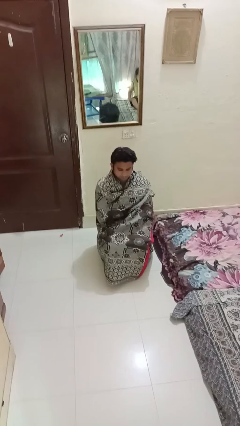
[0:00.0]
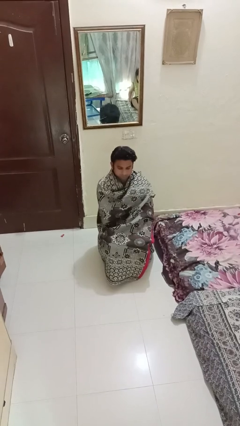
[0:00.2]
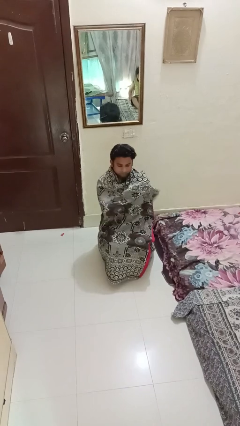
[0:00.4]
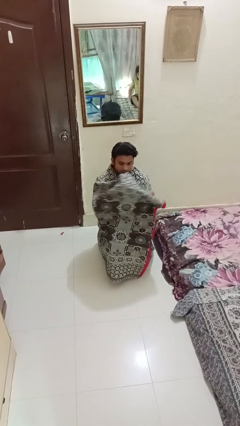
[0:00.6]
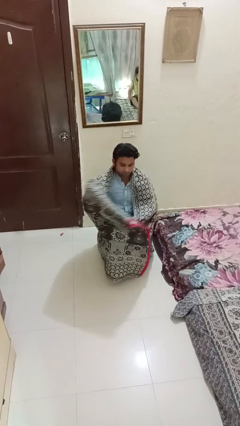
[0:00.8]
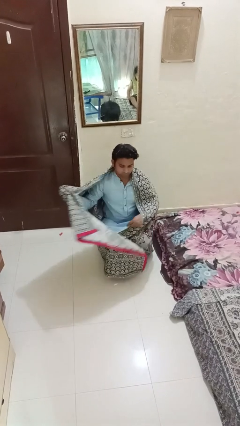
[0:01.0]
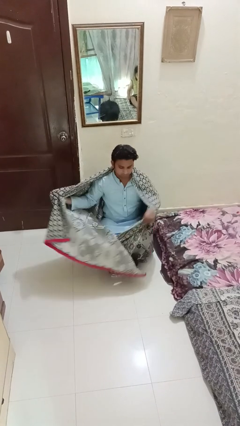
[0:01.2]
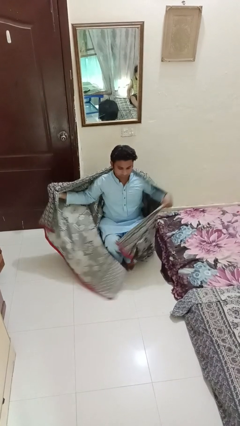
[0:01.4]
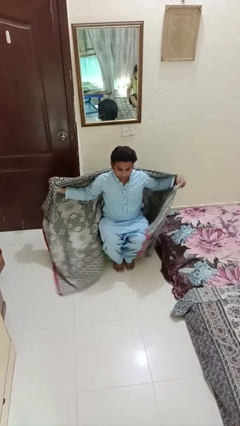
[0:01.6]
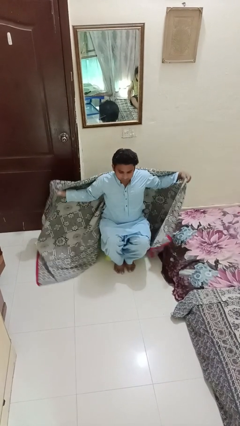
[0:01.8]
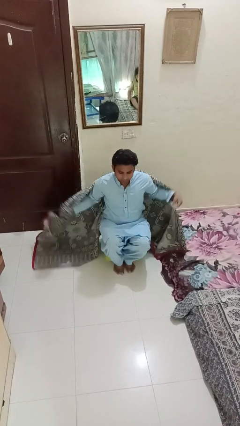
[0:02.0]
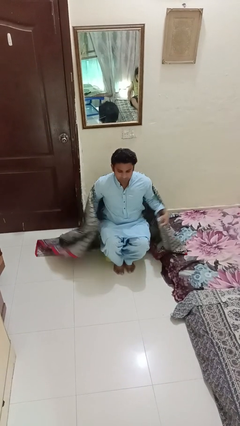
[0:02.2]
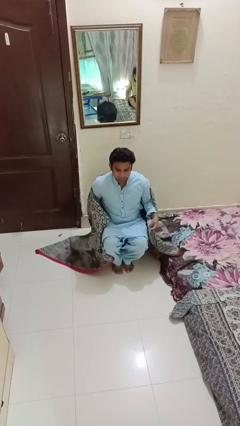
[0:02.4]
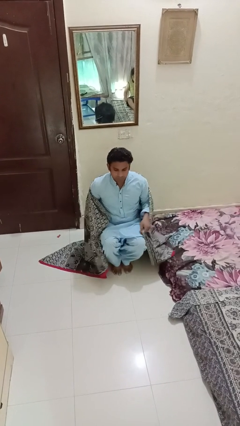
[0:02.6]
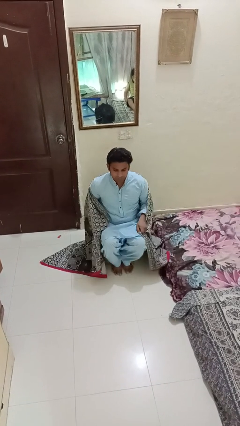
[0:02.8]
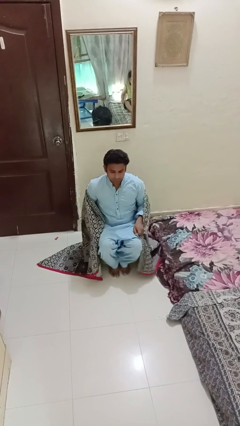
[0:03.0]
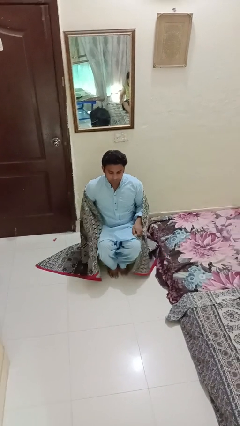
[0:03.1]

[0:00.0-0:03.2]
person uncovers with blanket

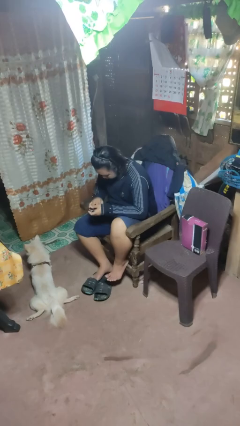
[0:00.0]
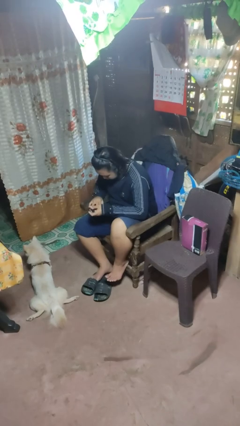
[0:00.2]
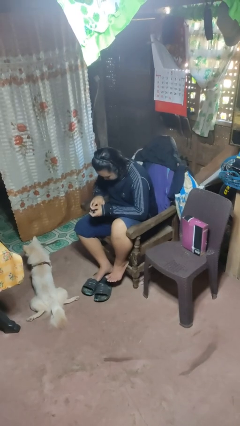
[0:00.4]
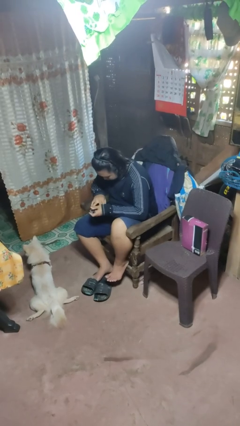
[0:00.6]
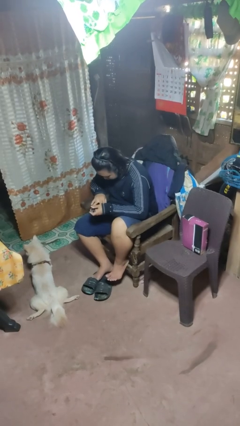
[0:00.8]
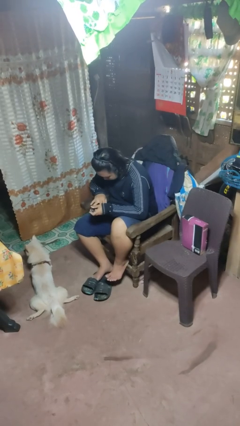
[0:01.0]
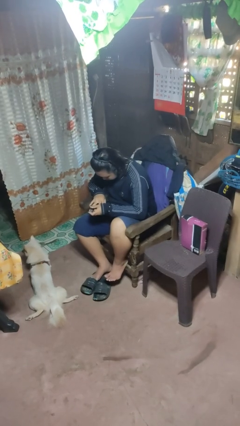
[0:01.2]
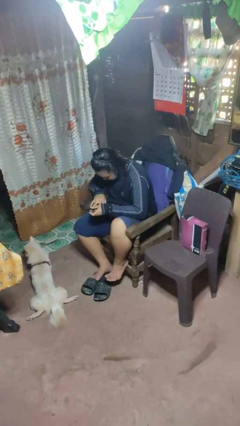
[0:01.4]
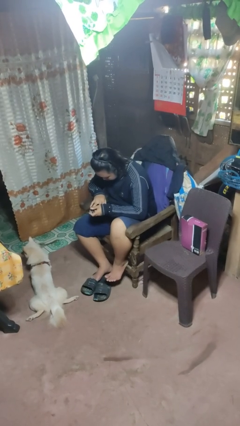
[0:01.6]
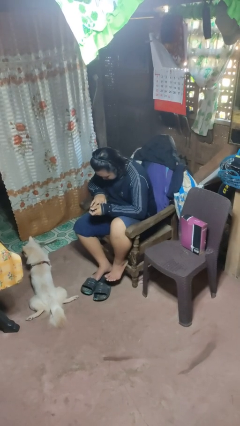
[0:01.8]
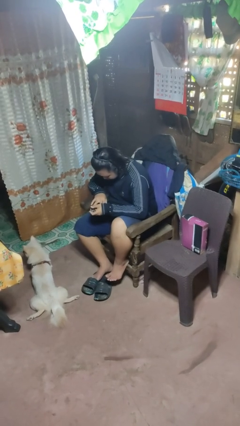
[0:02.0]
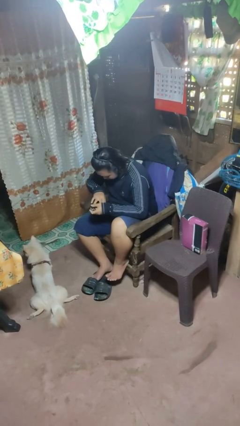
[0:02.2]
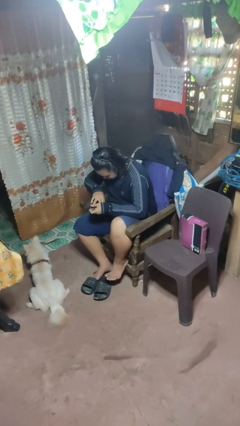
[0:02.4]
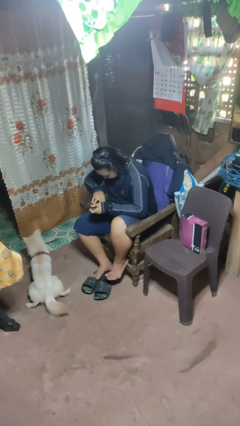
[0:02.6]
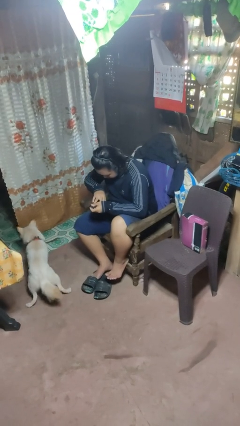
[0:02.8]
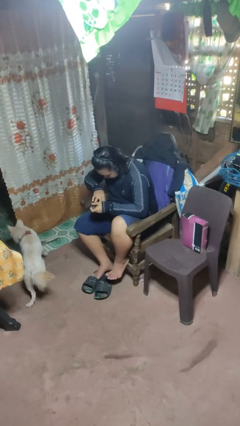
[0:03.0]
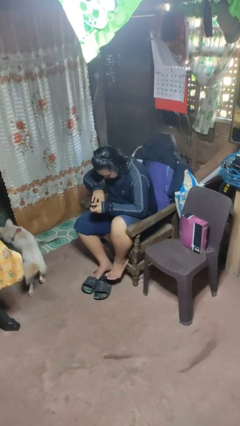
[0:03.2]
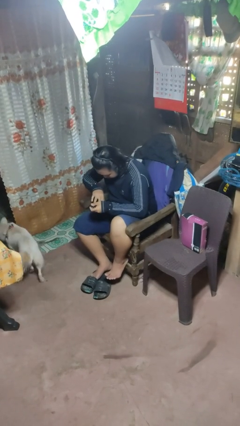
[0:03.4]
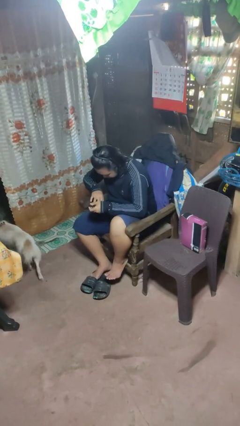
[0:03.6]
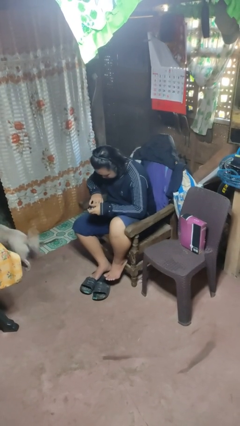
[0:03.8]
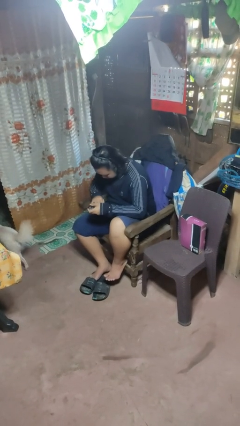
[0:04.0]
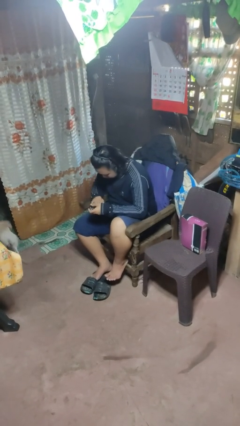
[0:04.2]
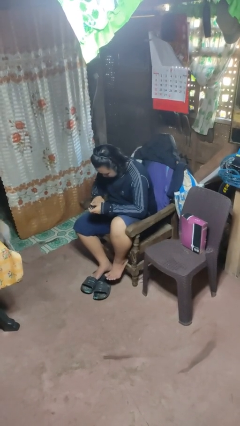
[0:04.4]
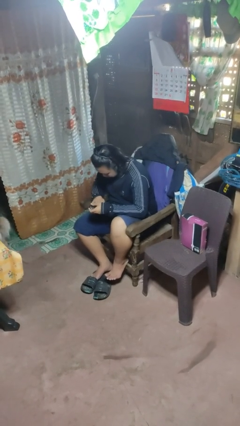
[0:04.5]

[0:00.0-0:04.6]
person clips fingernails

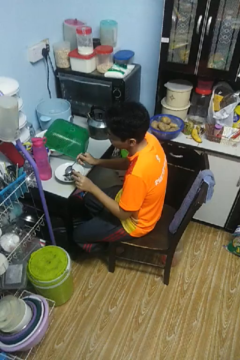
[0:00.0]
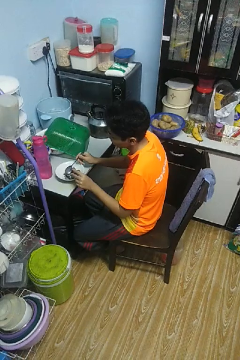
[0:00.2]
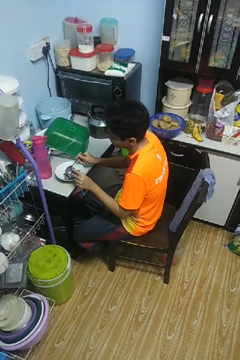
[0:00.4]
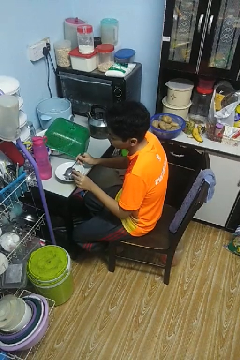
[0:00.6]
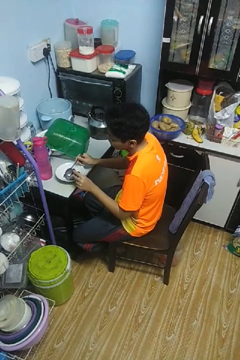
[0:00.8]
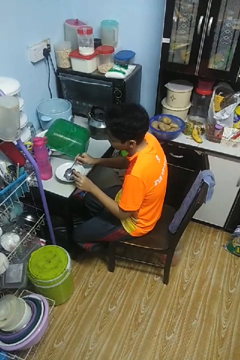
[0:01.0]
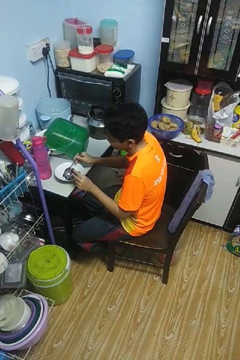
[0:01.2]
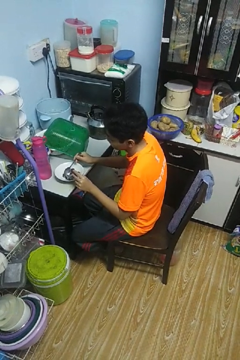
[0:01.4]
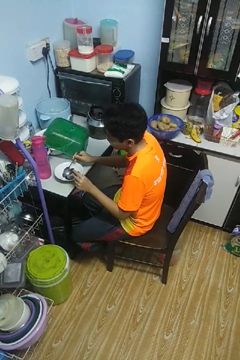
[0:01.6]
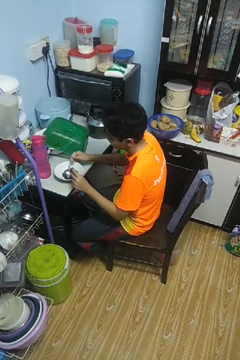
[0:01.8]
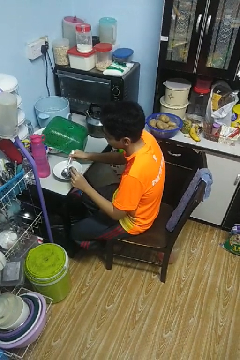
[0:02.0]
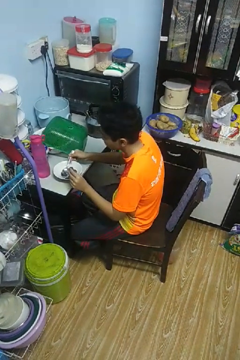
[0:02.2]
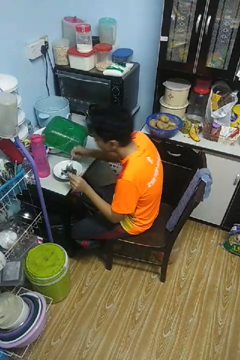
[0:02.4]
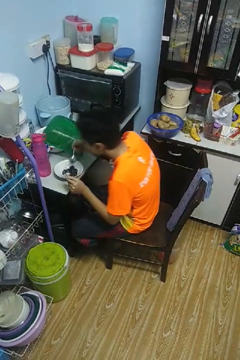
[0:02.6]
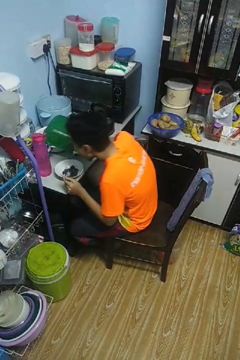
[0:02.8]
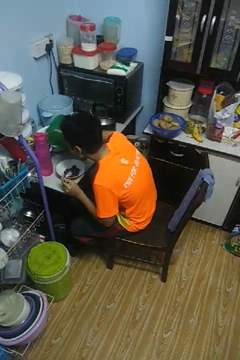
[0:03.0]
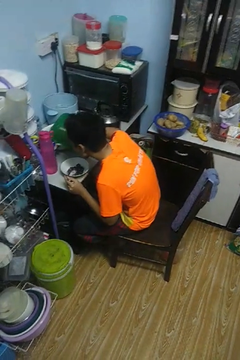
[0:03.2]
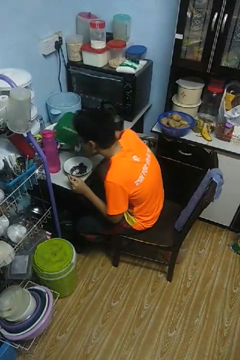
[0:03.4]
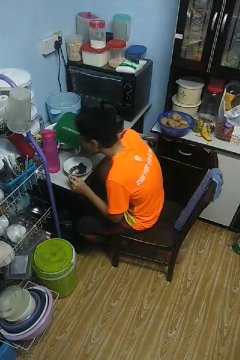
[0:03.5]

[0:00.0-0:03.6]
person eats with utensil

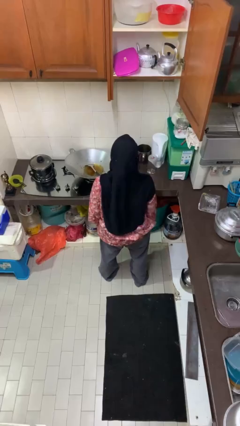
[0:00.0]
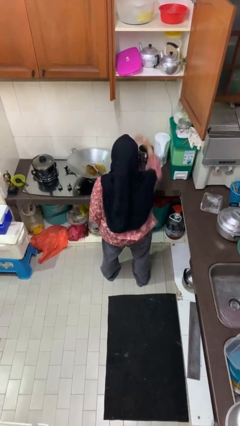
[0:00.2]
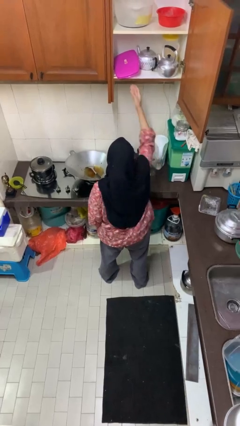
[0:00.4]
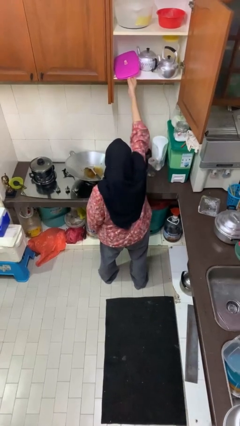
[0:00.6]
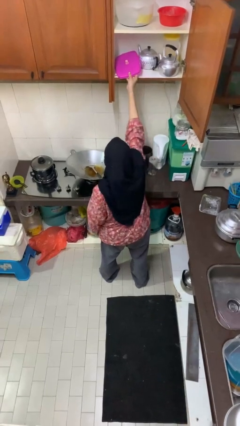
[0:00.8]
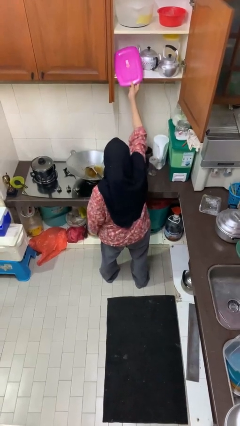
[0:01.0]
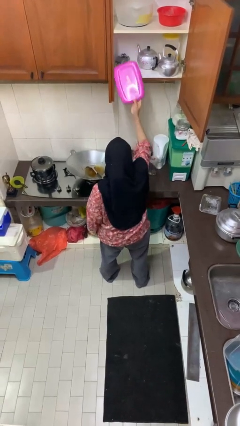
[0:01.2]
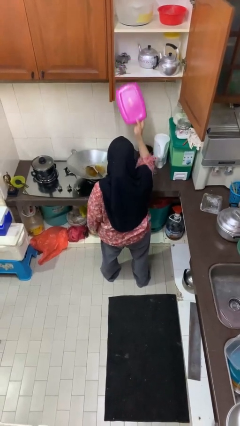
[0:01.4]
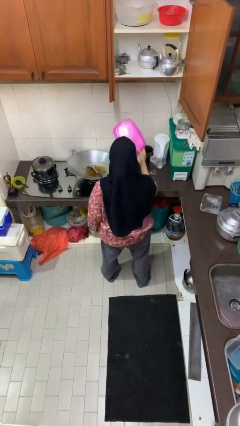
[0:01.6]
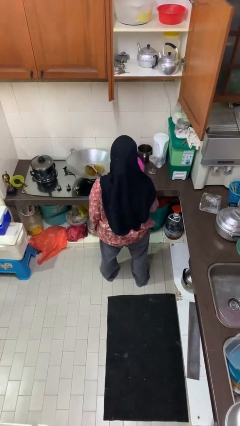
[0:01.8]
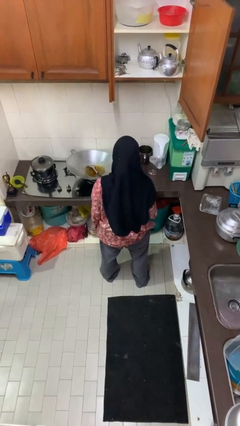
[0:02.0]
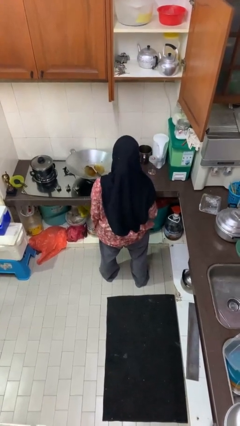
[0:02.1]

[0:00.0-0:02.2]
person takes object from cabinet

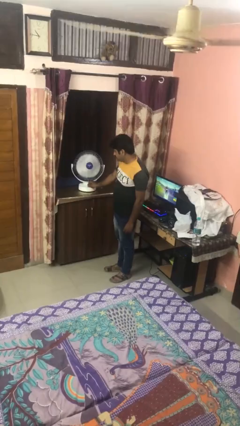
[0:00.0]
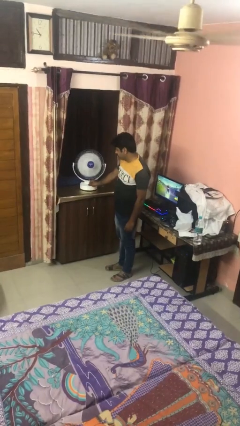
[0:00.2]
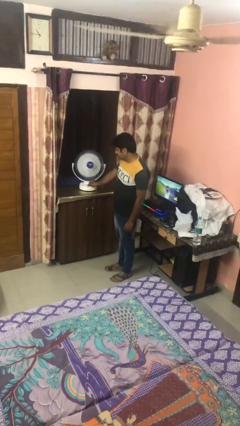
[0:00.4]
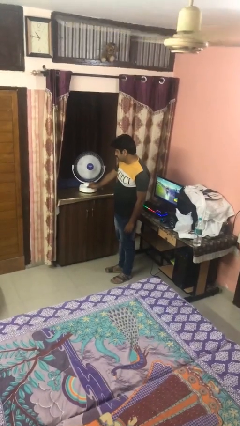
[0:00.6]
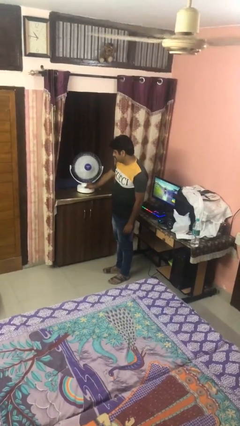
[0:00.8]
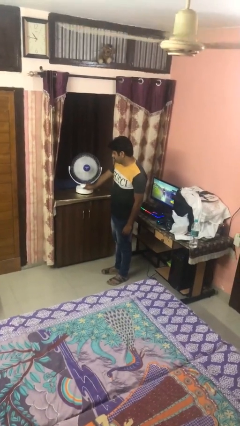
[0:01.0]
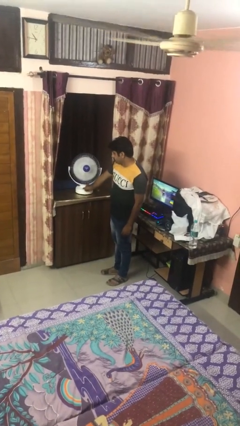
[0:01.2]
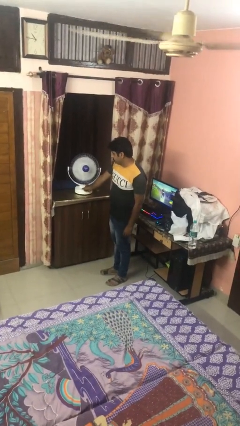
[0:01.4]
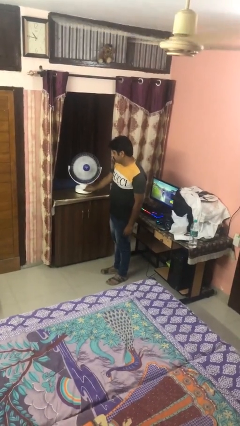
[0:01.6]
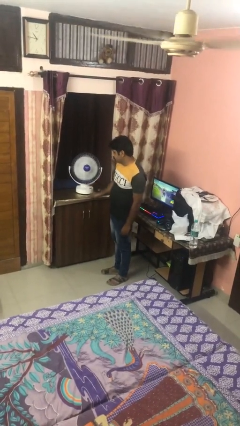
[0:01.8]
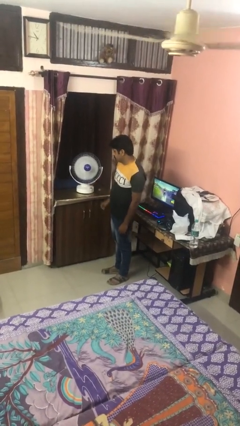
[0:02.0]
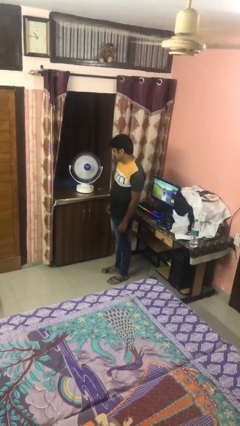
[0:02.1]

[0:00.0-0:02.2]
person turns off fan

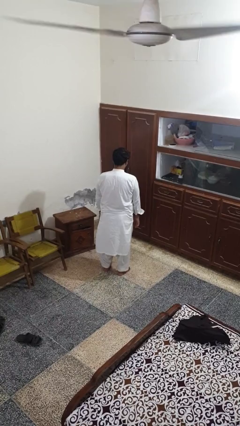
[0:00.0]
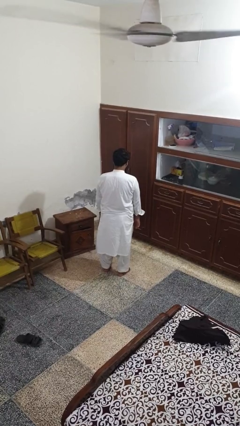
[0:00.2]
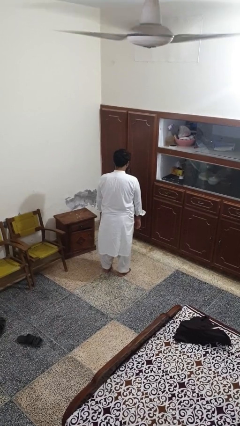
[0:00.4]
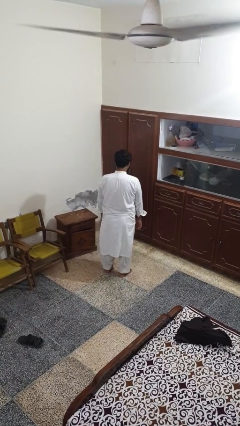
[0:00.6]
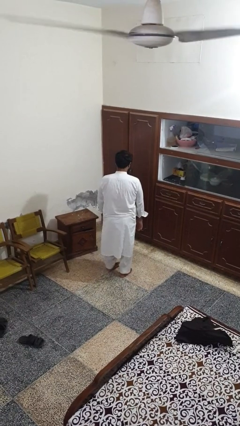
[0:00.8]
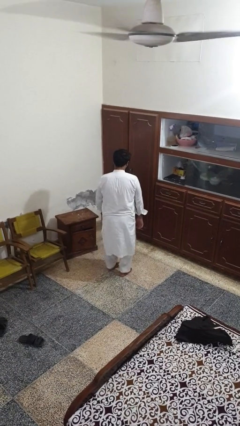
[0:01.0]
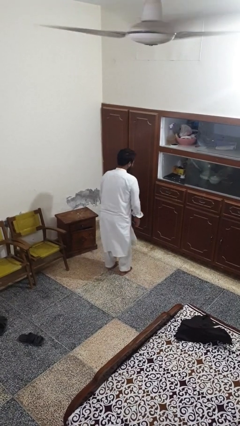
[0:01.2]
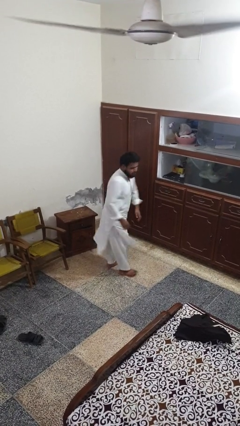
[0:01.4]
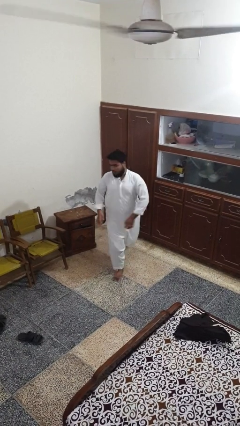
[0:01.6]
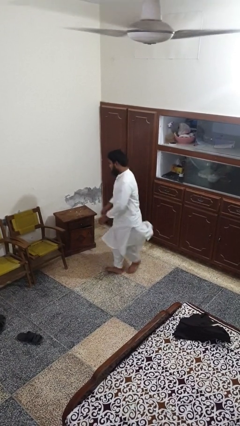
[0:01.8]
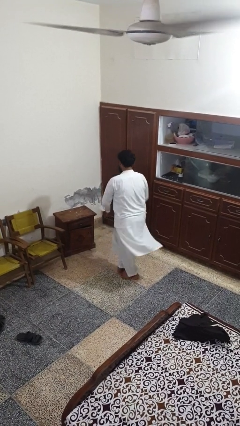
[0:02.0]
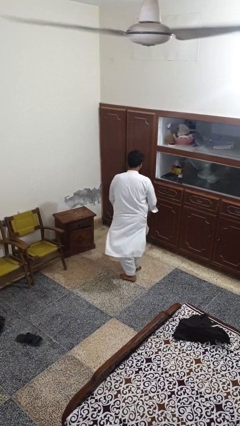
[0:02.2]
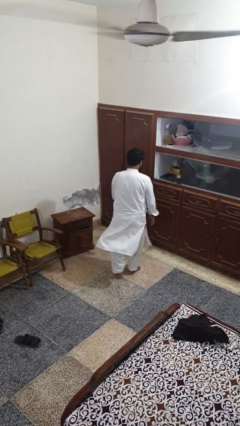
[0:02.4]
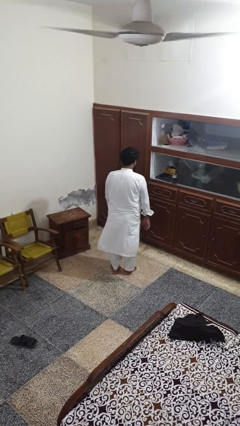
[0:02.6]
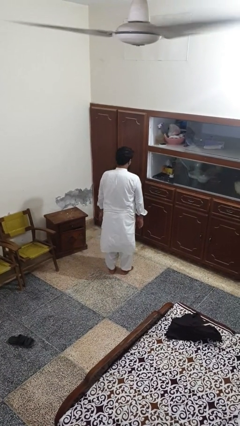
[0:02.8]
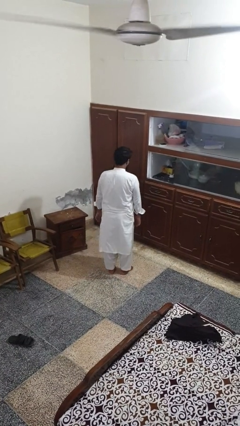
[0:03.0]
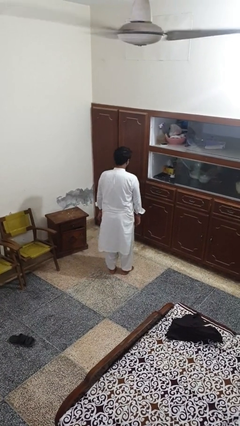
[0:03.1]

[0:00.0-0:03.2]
person twirls
